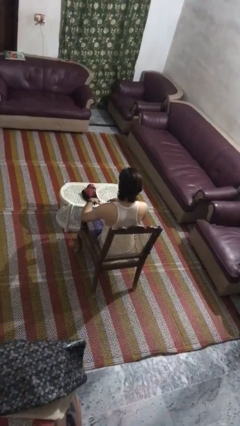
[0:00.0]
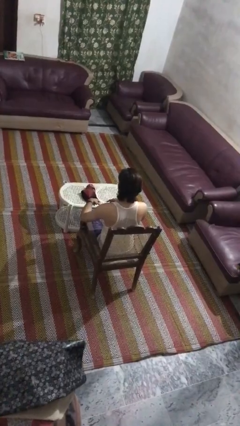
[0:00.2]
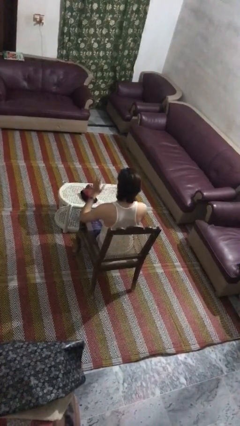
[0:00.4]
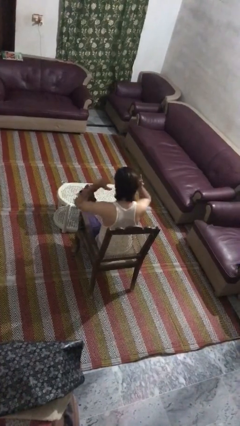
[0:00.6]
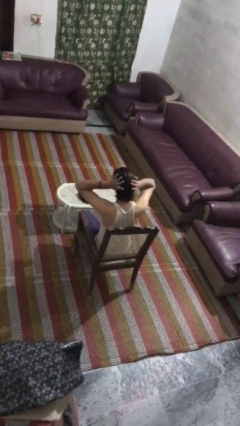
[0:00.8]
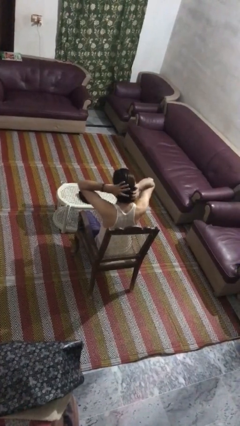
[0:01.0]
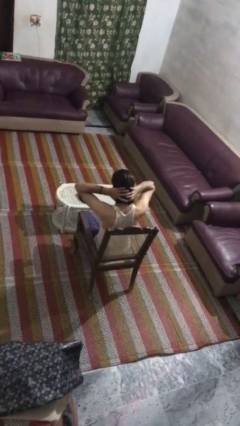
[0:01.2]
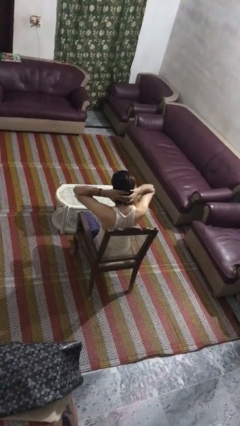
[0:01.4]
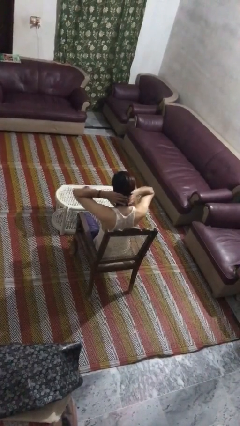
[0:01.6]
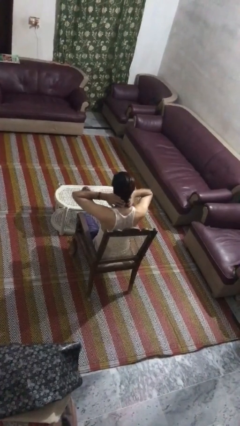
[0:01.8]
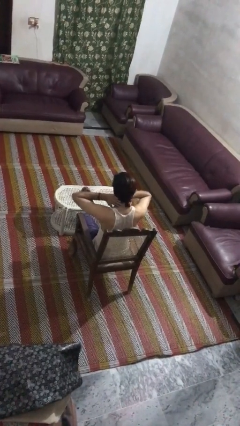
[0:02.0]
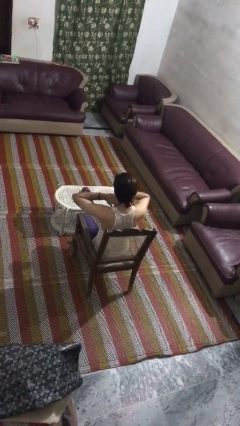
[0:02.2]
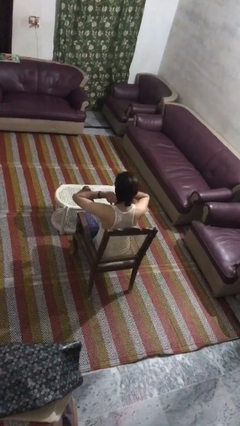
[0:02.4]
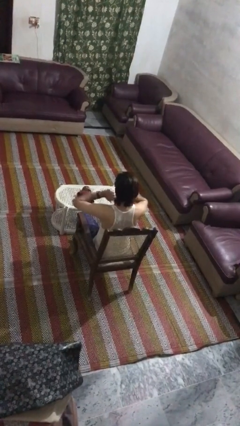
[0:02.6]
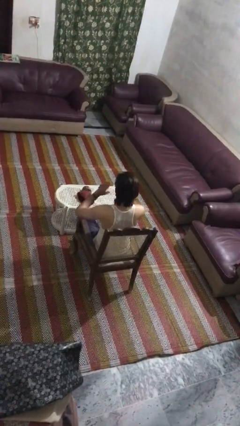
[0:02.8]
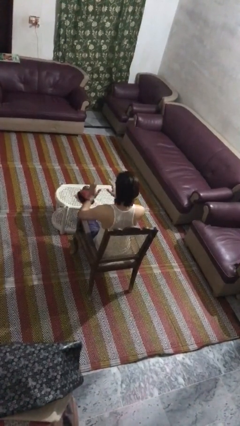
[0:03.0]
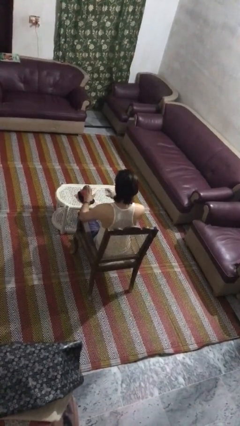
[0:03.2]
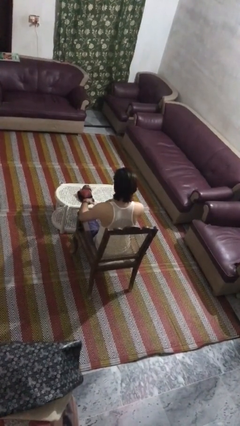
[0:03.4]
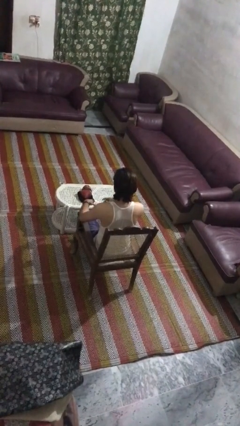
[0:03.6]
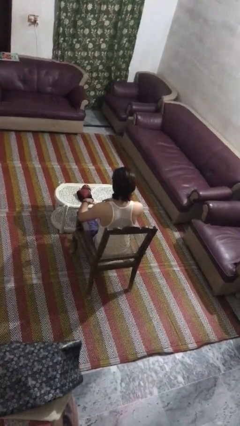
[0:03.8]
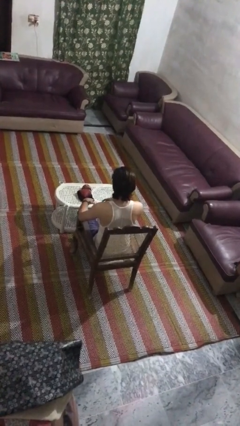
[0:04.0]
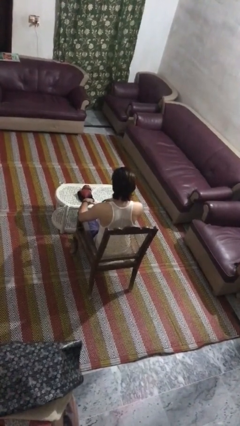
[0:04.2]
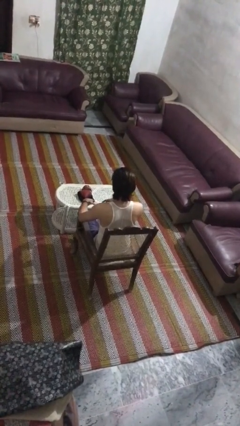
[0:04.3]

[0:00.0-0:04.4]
person strokes hair

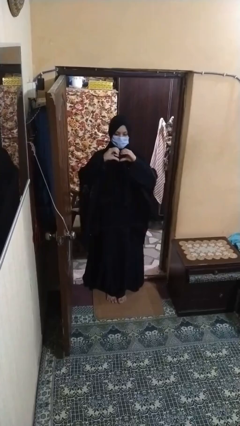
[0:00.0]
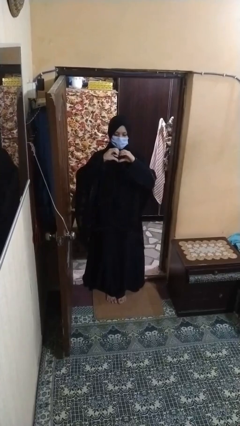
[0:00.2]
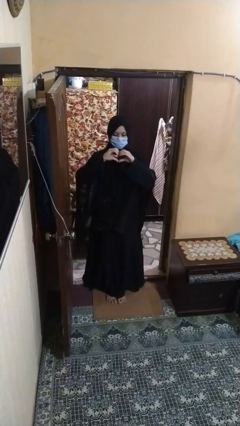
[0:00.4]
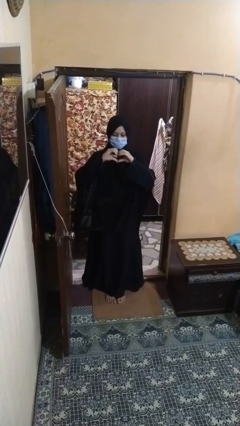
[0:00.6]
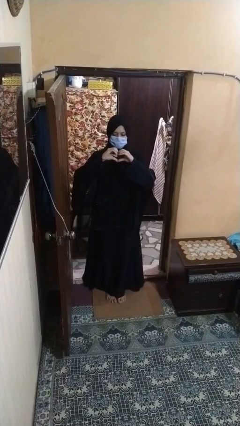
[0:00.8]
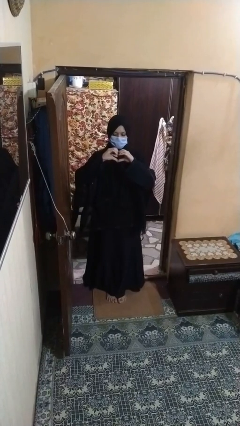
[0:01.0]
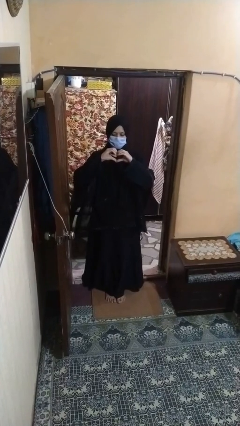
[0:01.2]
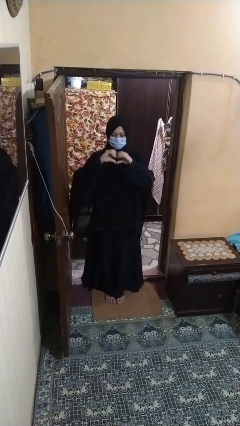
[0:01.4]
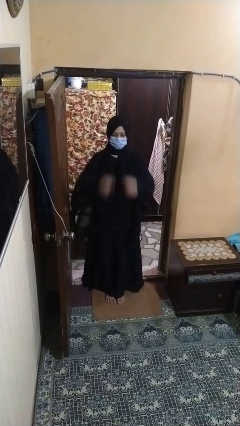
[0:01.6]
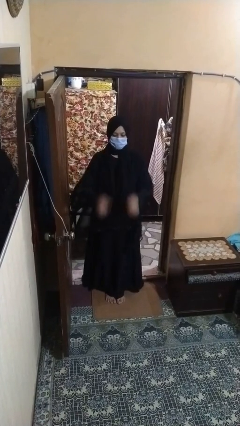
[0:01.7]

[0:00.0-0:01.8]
person gestures heart

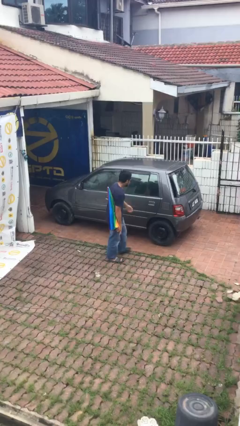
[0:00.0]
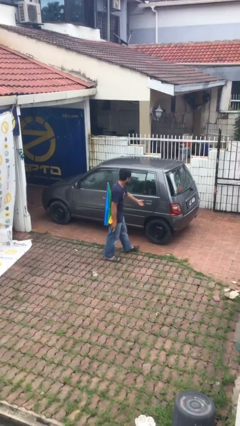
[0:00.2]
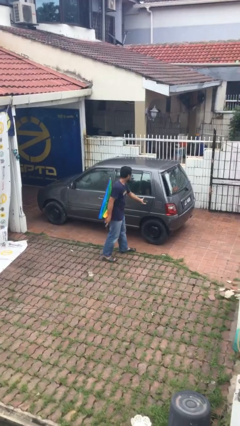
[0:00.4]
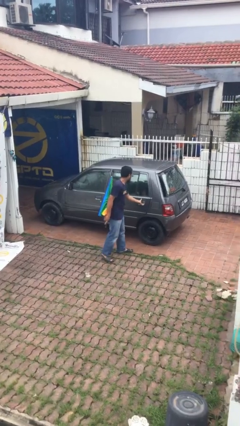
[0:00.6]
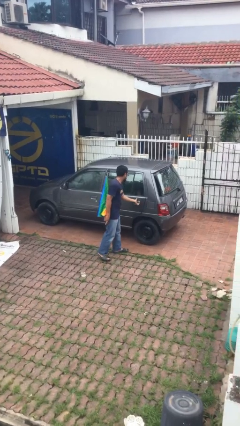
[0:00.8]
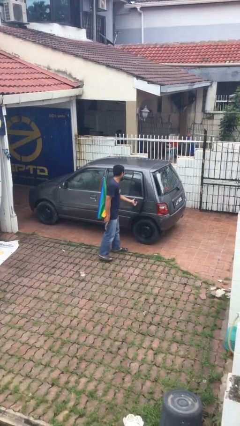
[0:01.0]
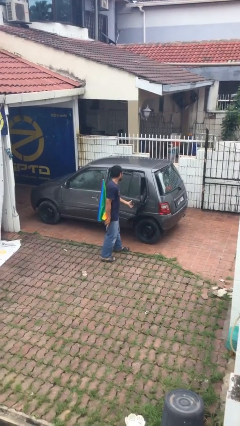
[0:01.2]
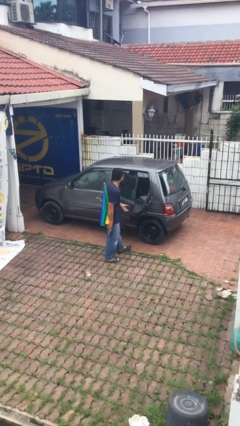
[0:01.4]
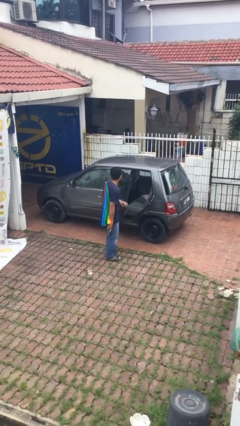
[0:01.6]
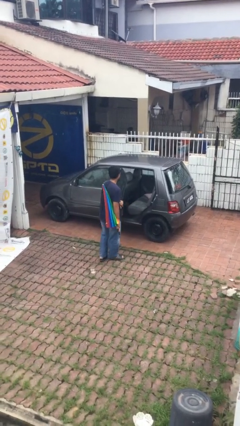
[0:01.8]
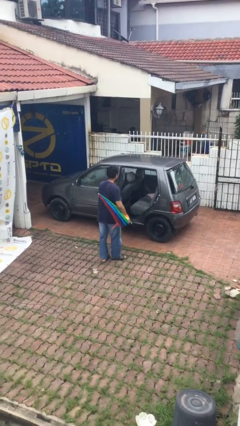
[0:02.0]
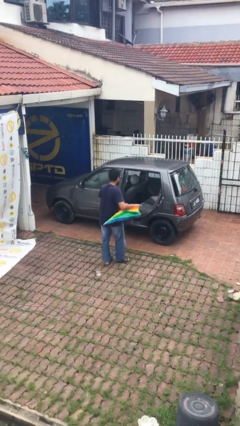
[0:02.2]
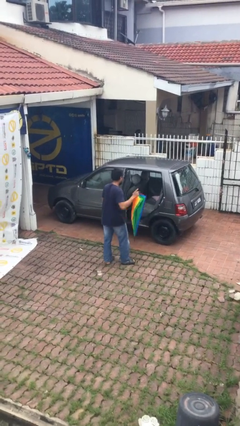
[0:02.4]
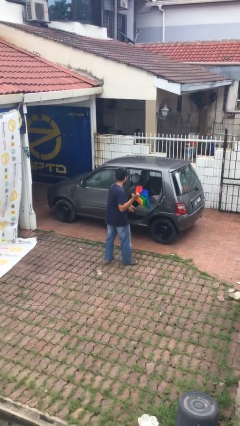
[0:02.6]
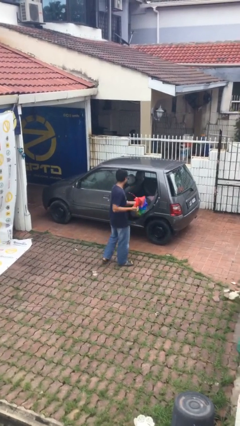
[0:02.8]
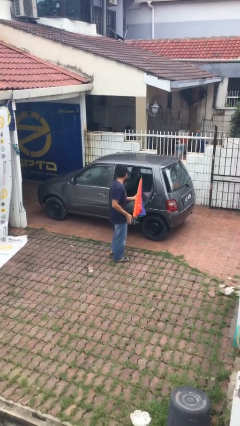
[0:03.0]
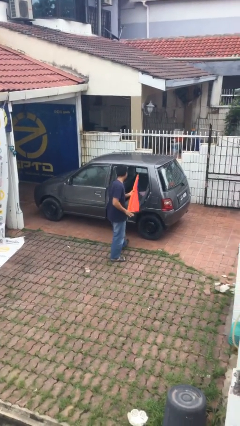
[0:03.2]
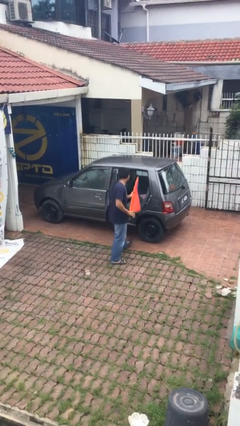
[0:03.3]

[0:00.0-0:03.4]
person opens car door

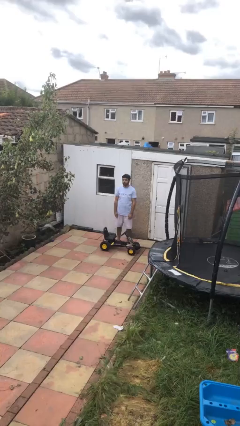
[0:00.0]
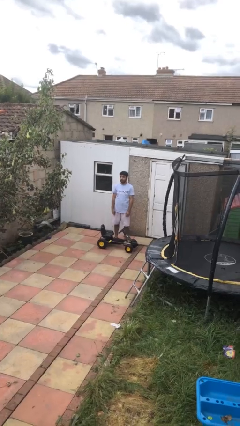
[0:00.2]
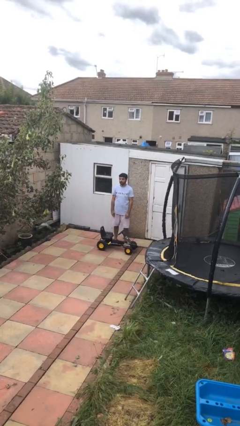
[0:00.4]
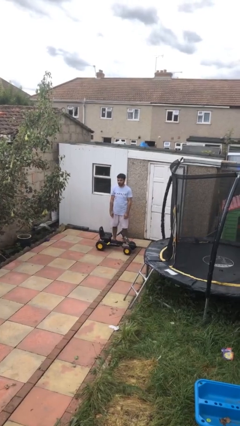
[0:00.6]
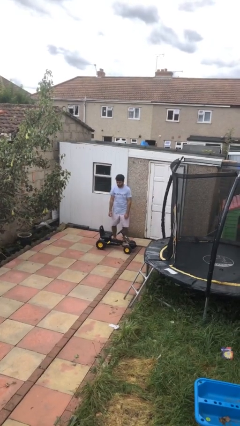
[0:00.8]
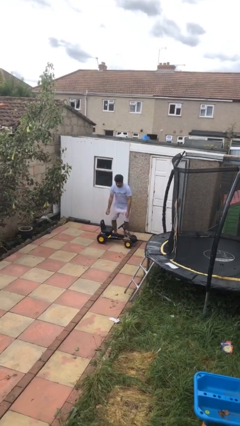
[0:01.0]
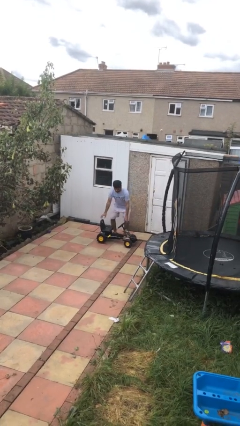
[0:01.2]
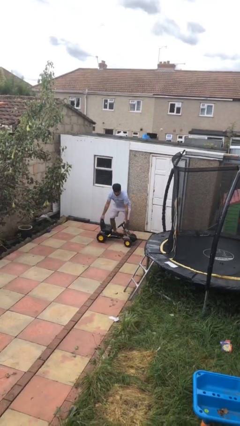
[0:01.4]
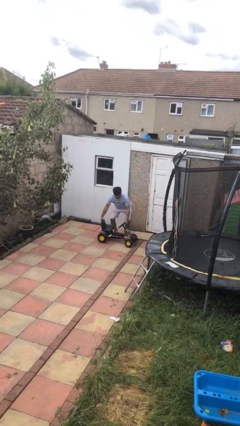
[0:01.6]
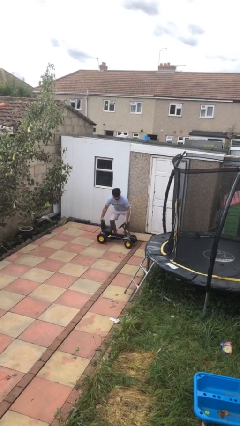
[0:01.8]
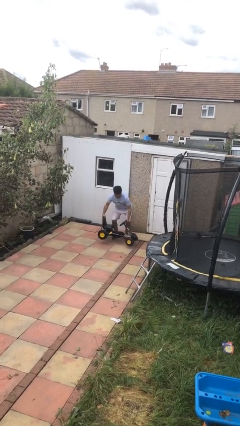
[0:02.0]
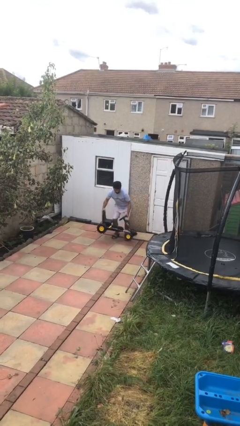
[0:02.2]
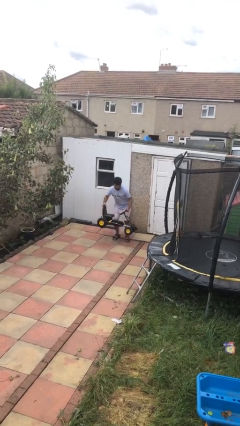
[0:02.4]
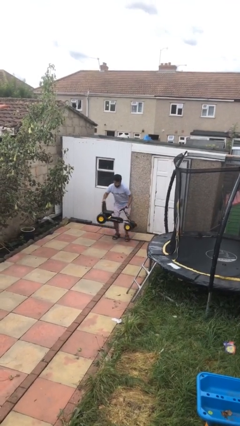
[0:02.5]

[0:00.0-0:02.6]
person picks up object from floor

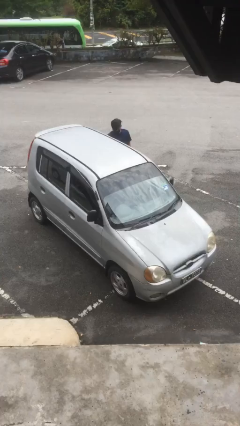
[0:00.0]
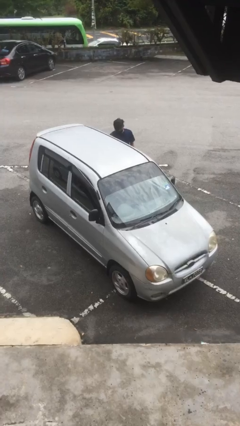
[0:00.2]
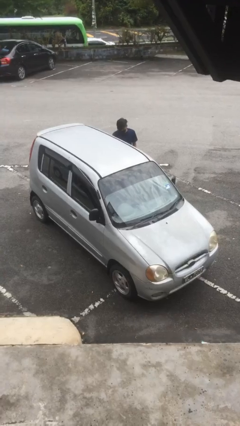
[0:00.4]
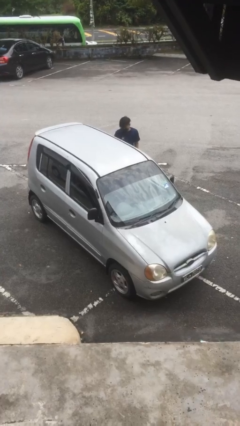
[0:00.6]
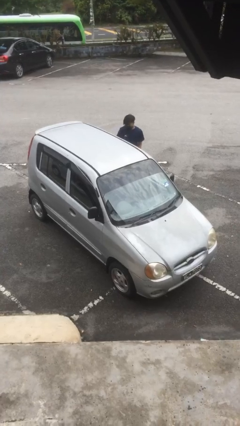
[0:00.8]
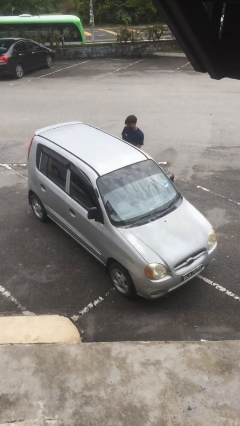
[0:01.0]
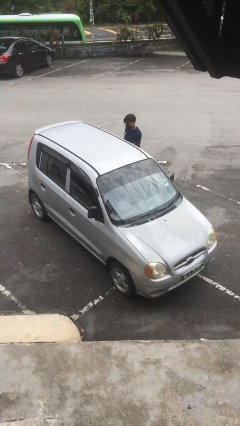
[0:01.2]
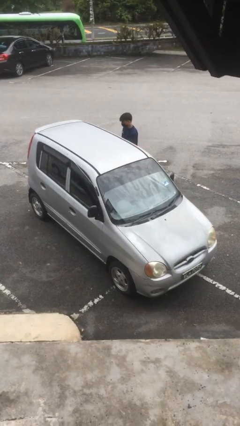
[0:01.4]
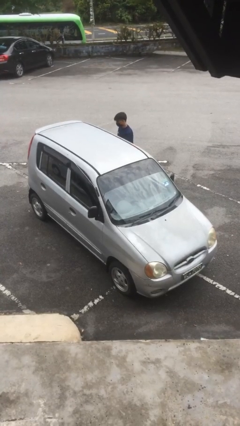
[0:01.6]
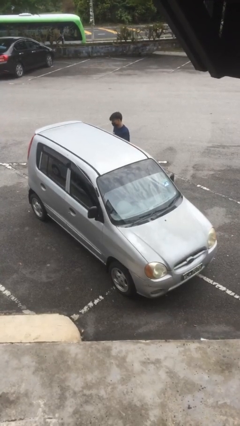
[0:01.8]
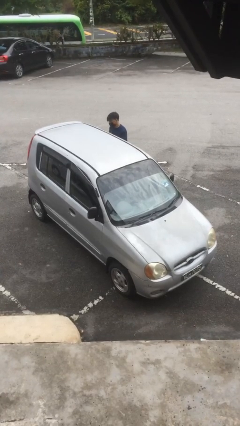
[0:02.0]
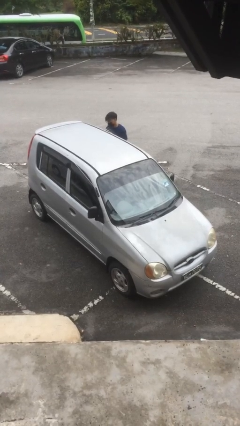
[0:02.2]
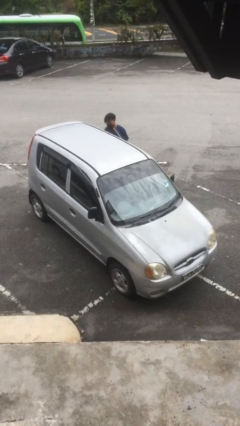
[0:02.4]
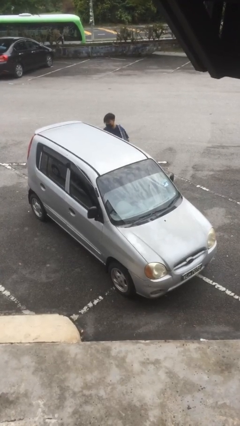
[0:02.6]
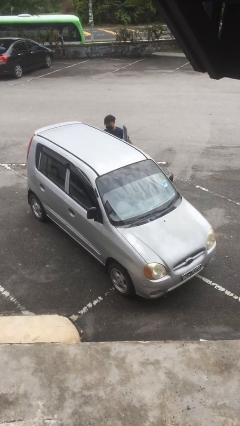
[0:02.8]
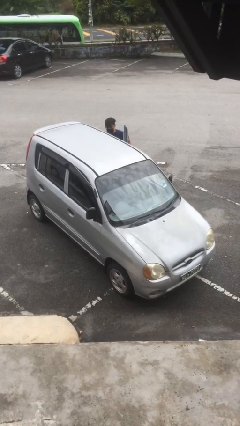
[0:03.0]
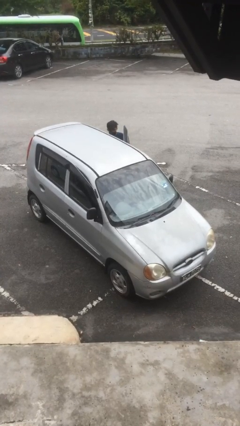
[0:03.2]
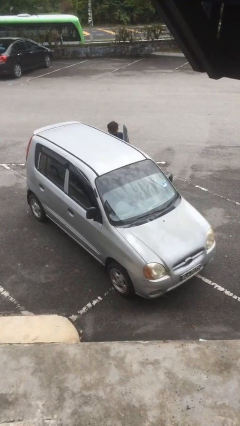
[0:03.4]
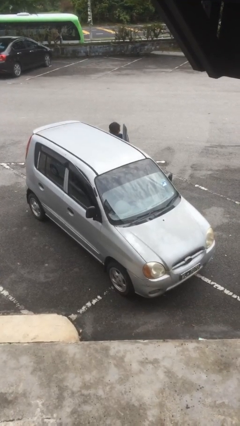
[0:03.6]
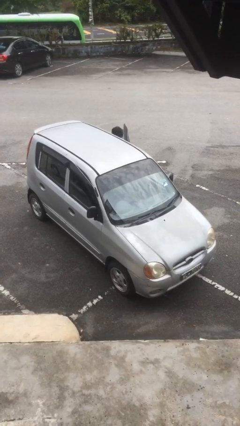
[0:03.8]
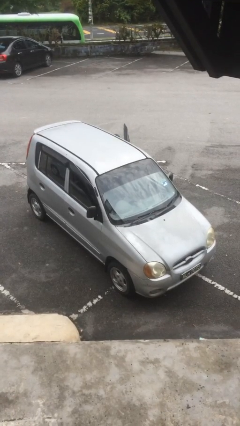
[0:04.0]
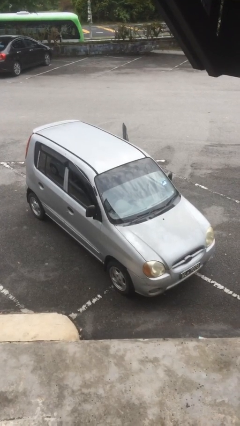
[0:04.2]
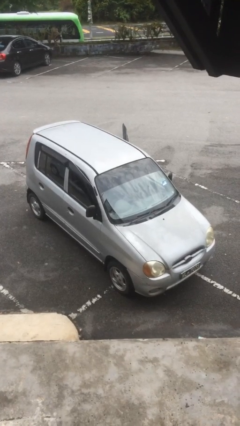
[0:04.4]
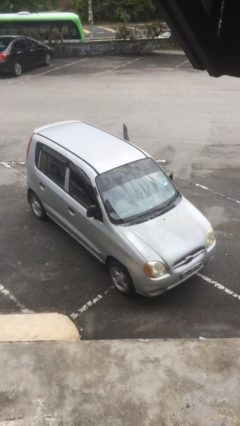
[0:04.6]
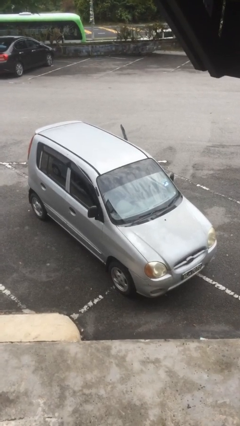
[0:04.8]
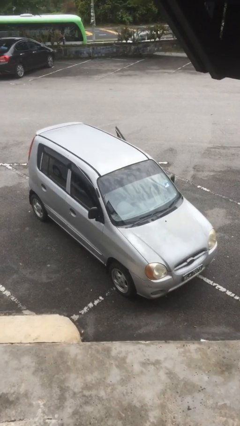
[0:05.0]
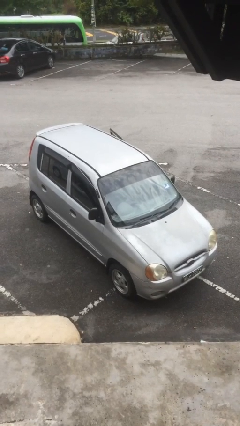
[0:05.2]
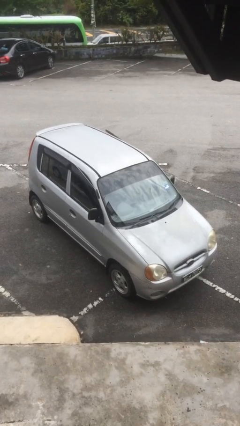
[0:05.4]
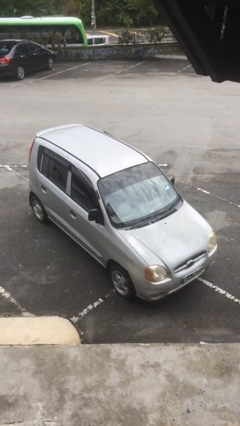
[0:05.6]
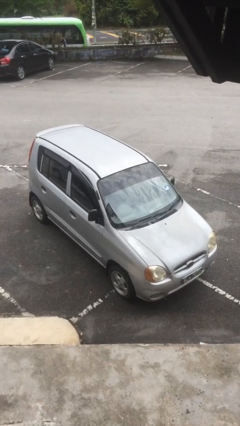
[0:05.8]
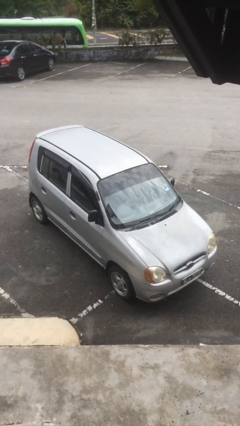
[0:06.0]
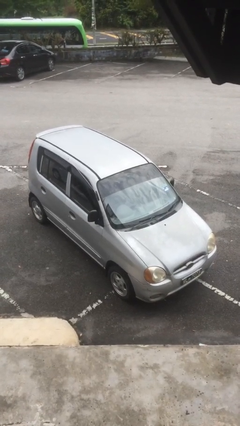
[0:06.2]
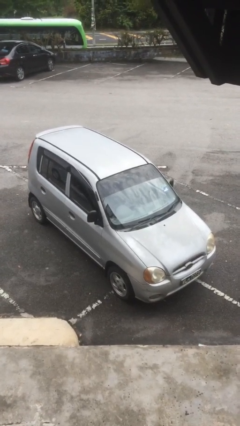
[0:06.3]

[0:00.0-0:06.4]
car picks up person
